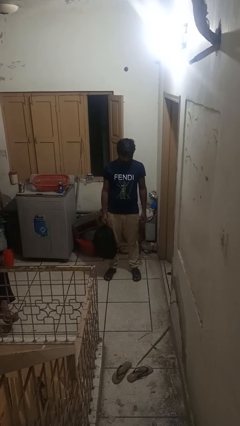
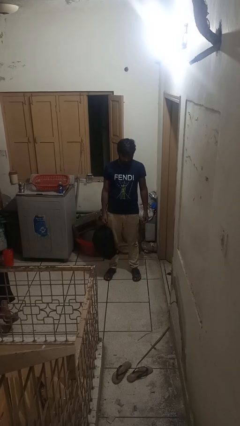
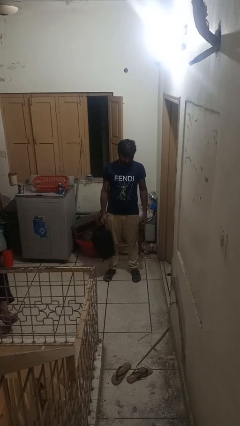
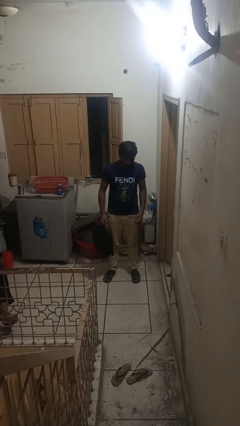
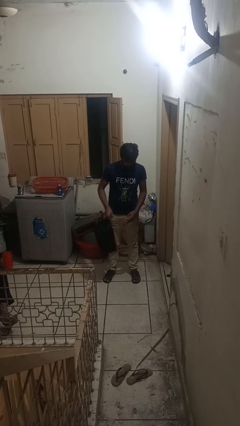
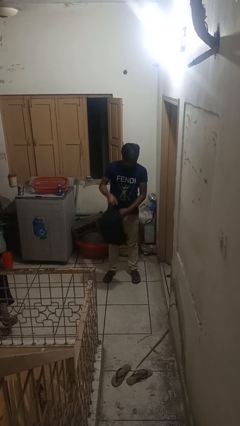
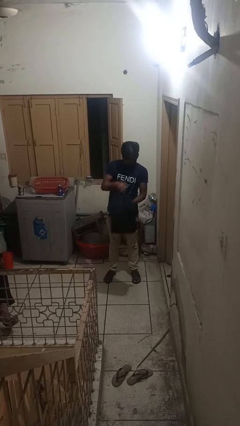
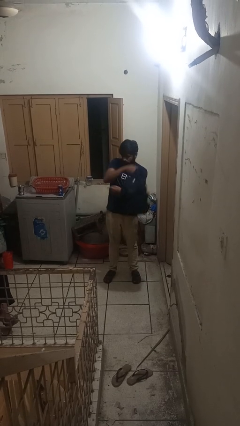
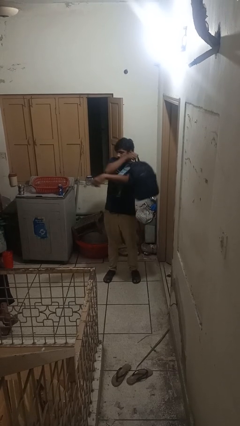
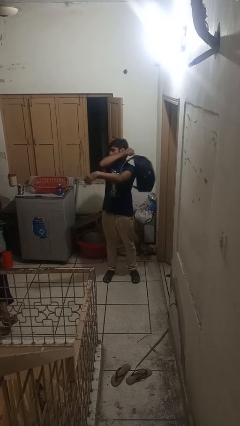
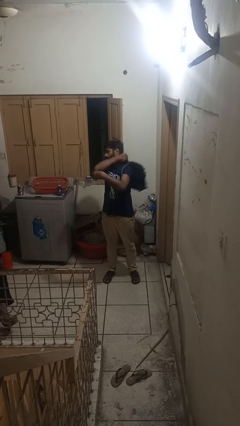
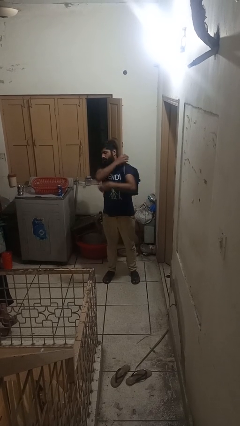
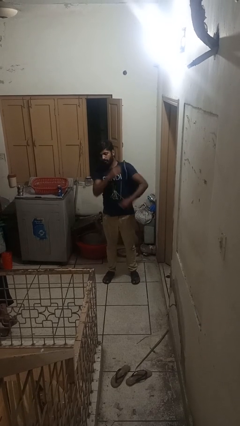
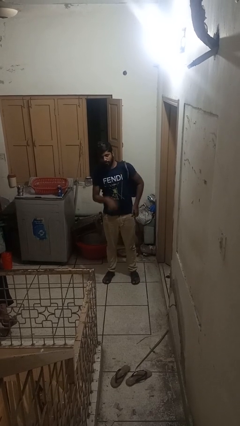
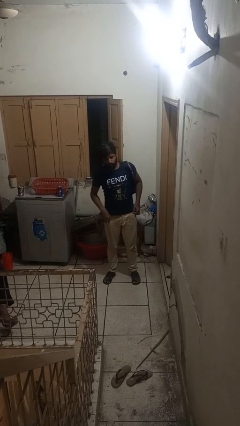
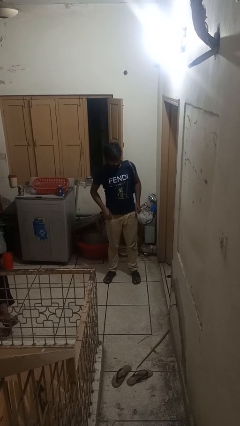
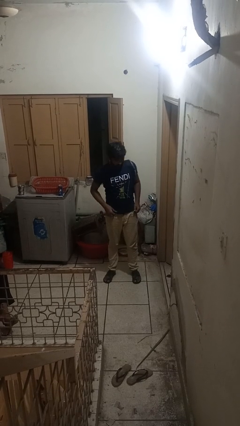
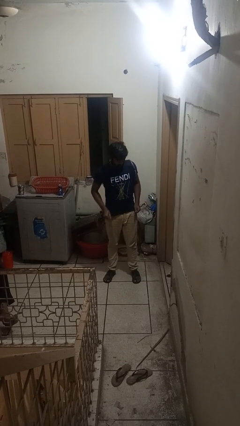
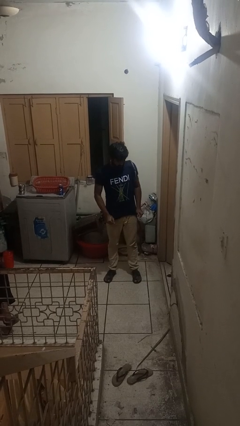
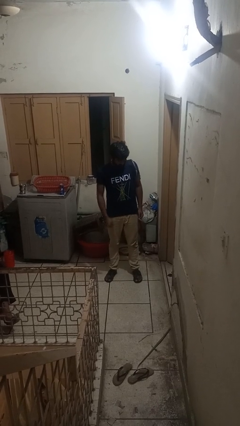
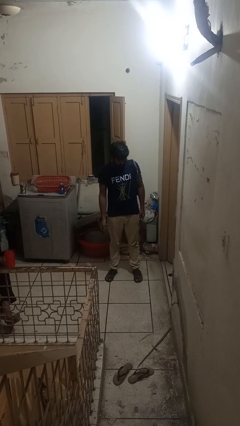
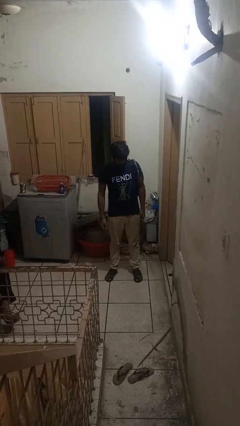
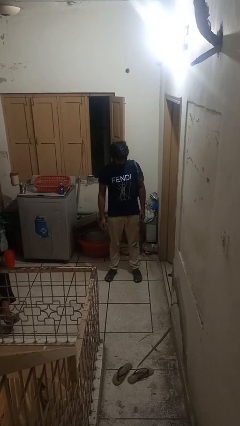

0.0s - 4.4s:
person puts on backpack

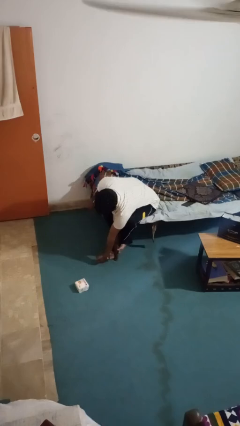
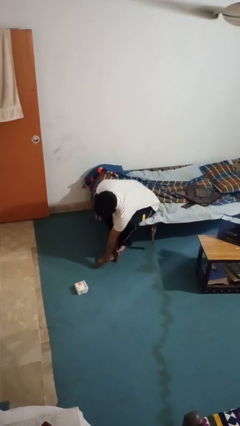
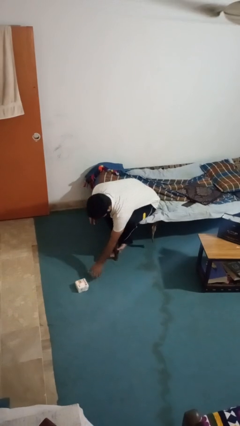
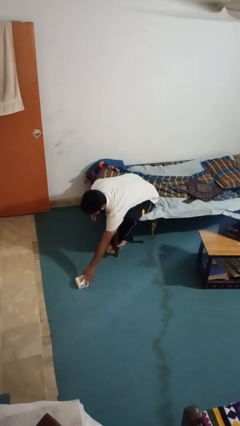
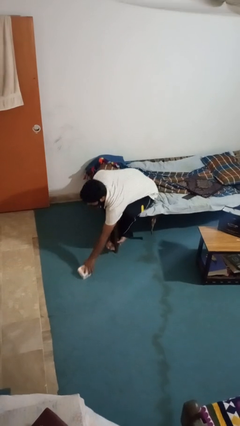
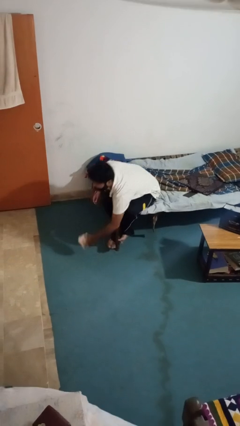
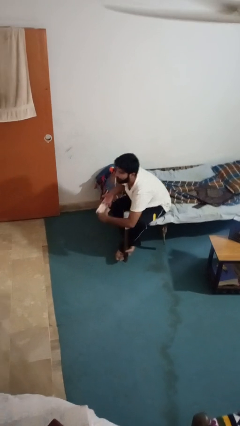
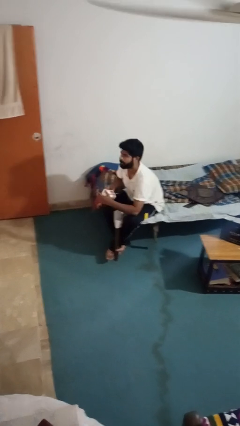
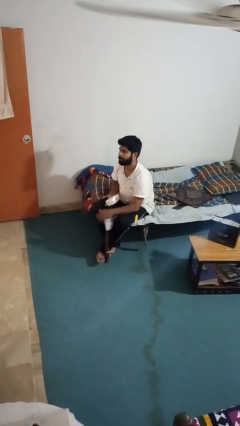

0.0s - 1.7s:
person picks up object from floor

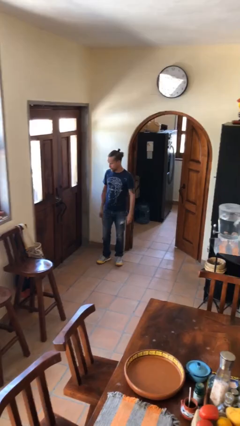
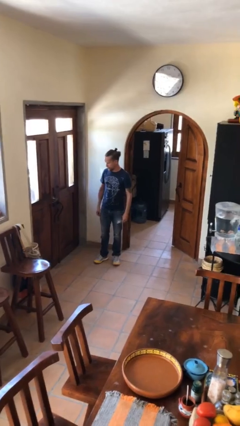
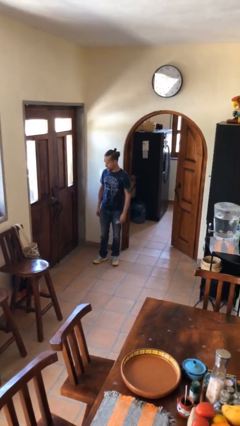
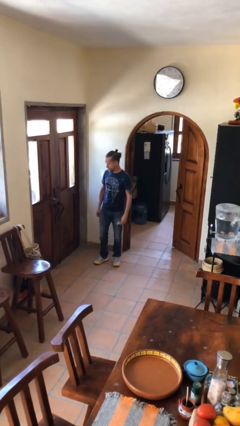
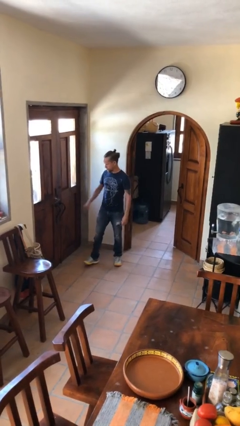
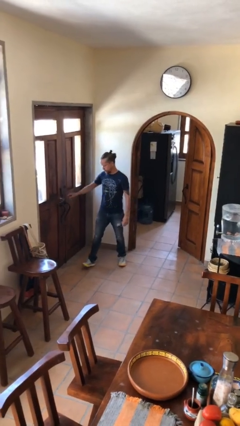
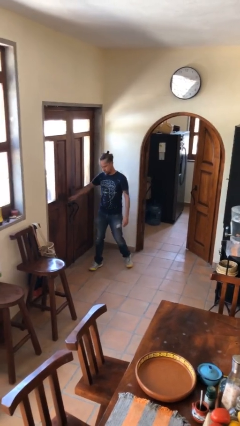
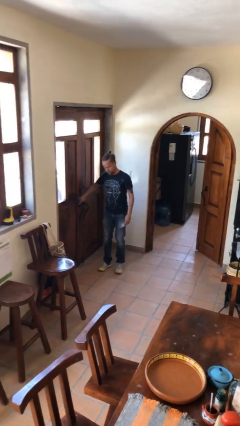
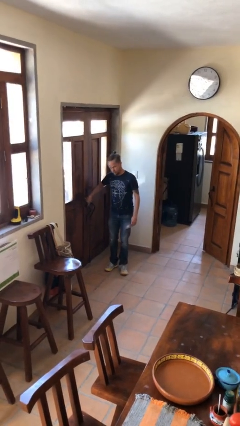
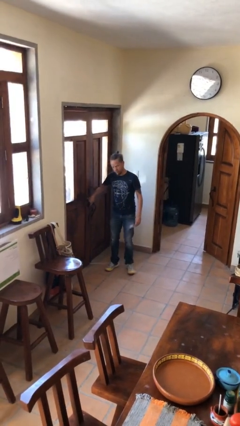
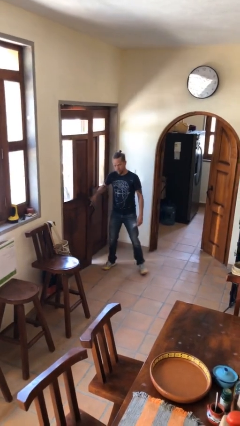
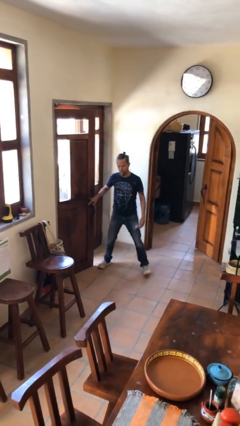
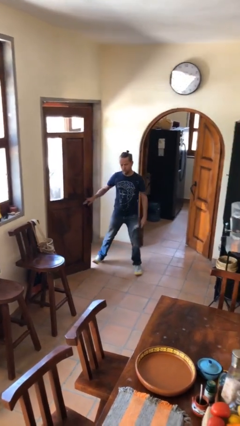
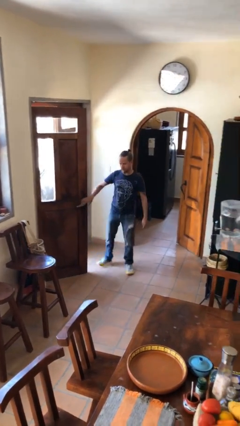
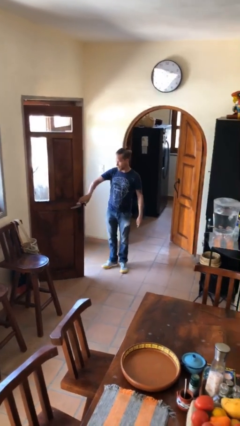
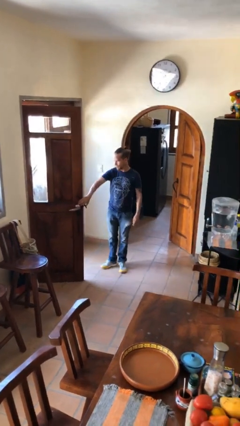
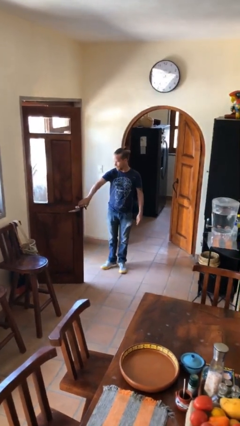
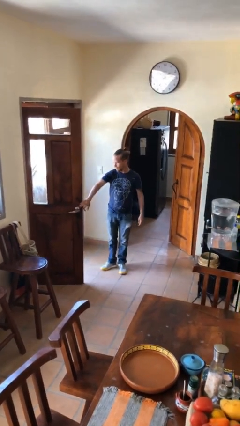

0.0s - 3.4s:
person opens facility door

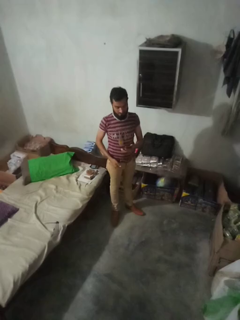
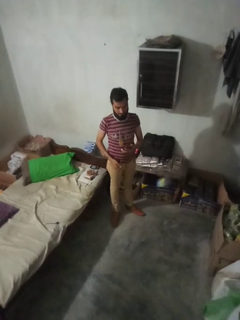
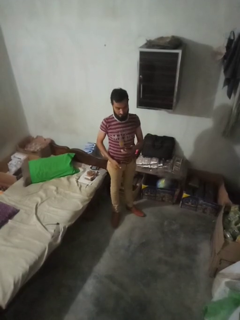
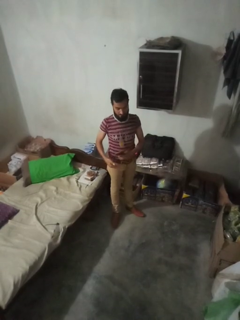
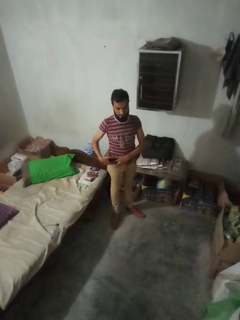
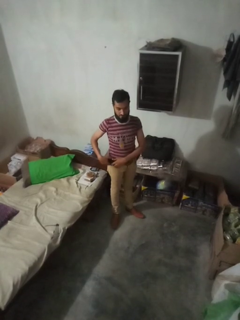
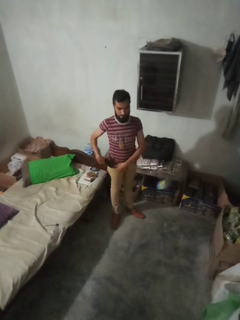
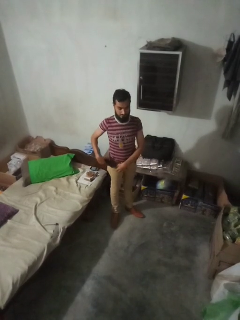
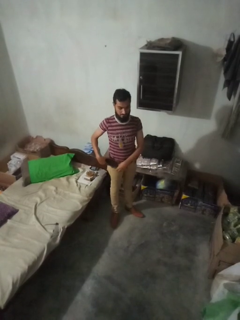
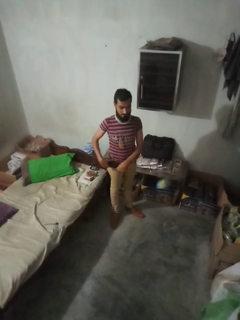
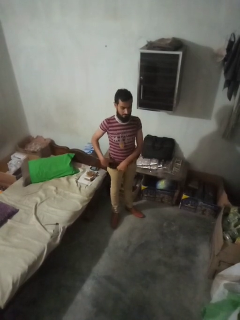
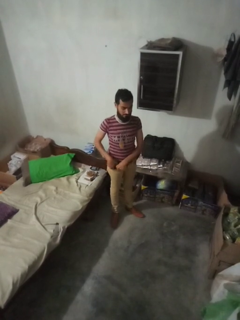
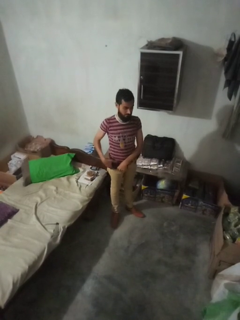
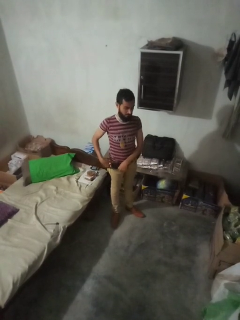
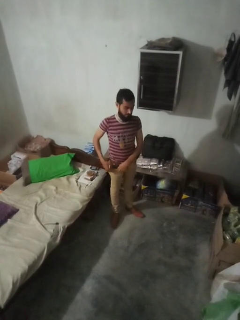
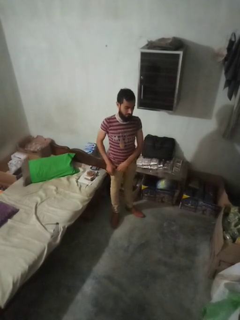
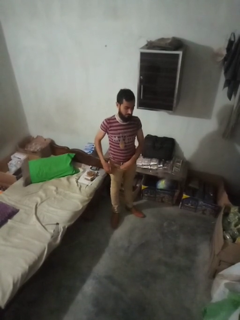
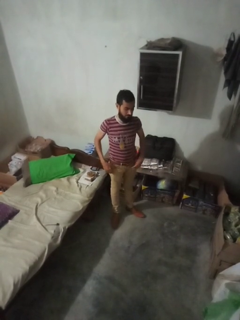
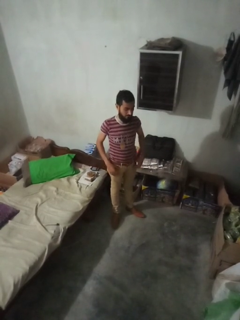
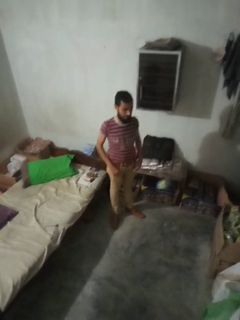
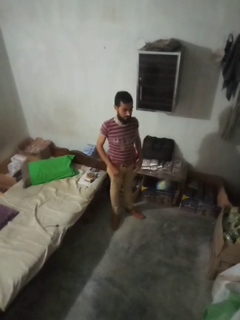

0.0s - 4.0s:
person puts phone into pocket

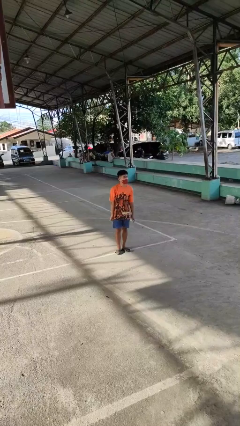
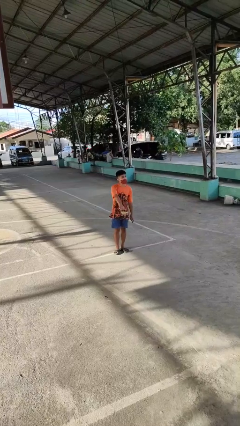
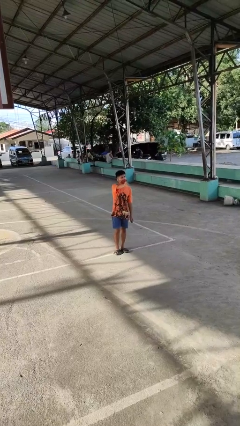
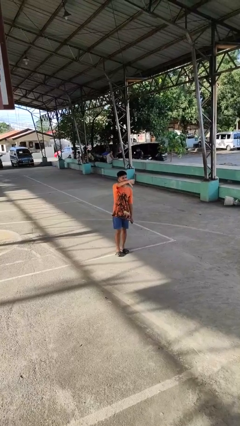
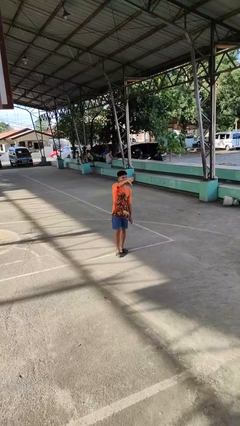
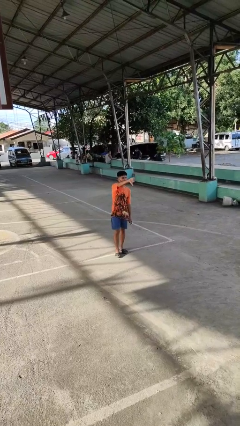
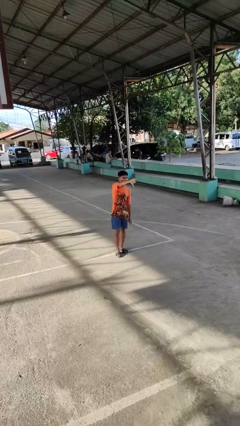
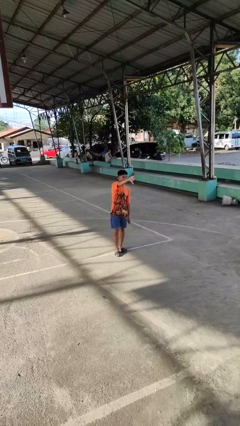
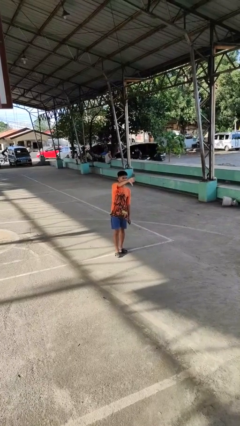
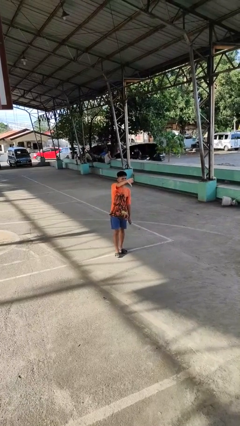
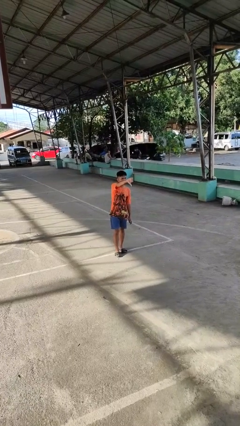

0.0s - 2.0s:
person gestures thumbs down

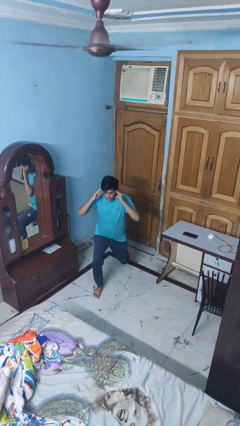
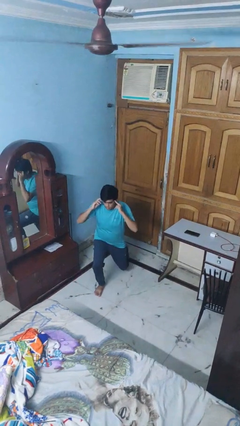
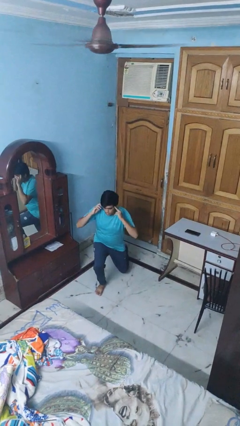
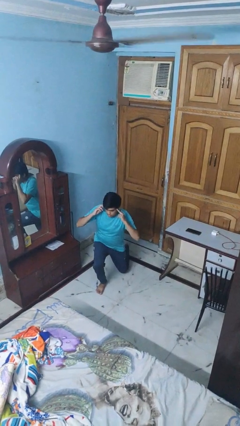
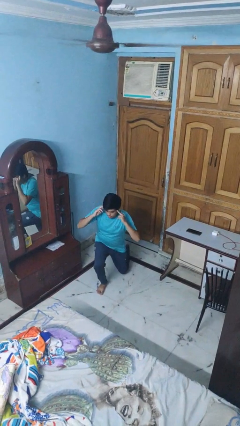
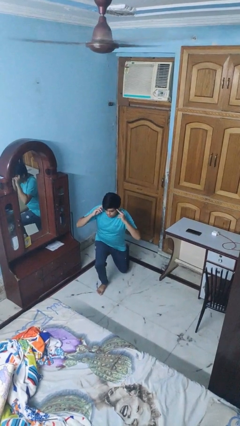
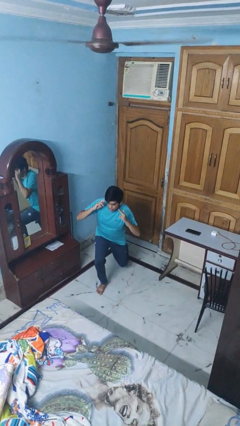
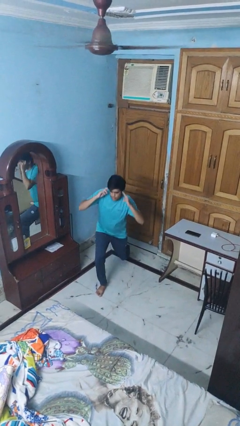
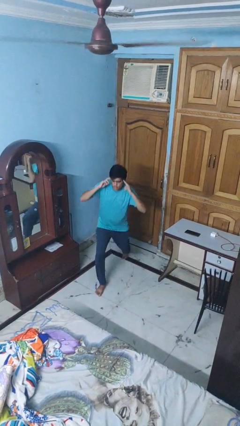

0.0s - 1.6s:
person exercises with lunges

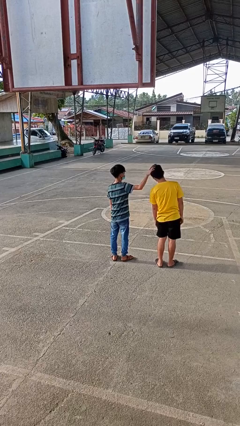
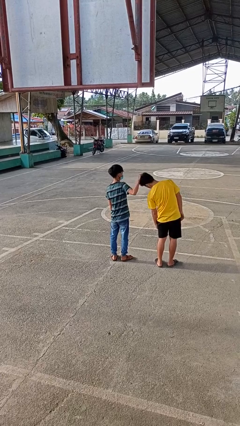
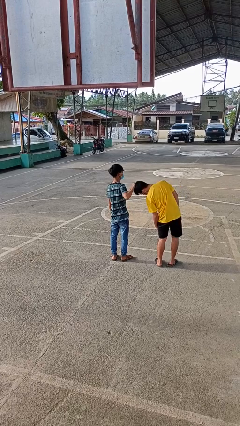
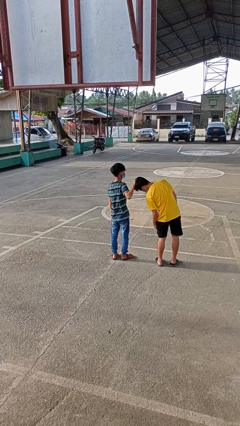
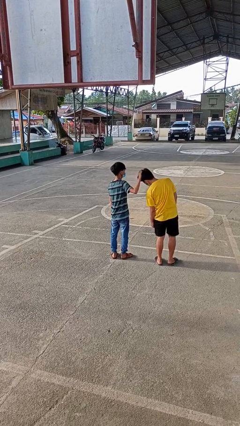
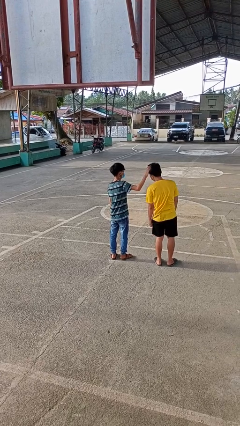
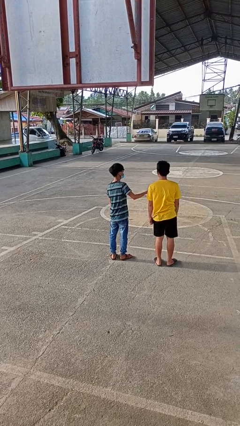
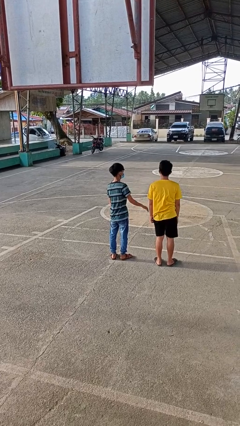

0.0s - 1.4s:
person grabs person by hair
